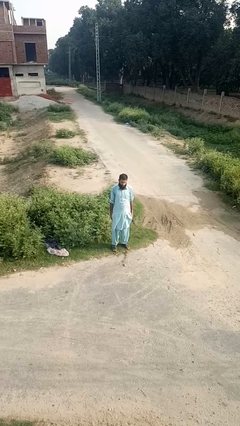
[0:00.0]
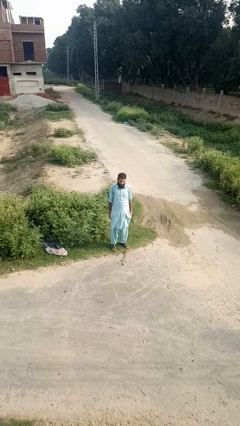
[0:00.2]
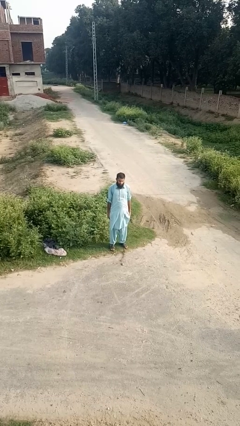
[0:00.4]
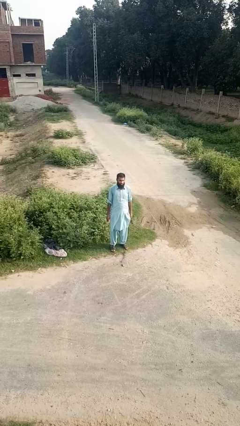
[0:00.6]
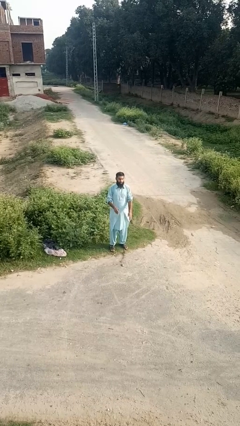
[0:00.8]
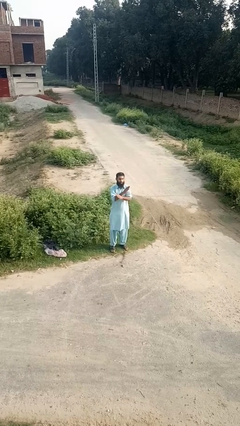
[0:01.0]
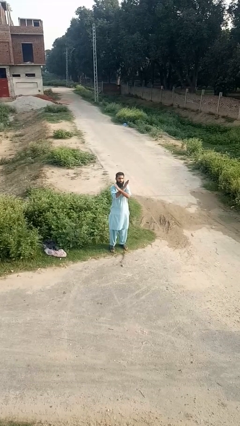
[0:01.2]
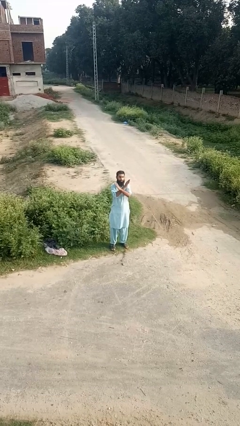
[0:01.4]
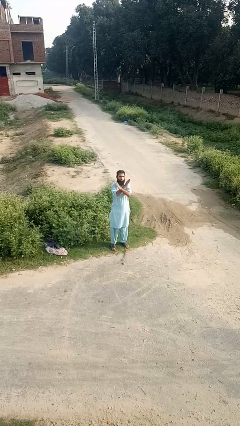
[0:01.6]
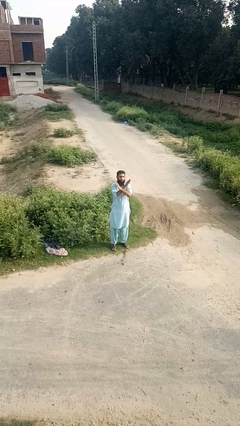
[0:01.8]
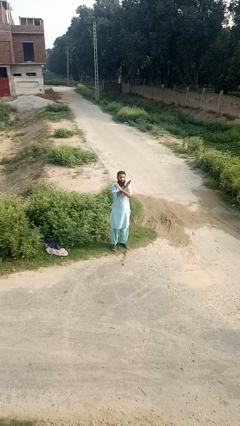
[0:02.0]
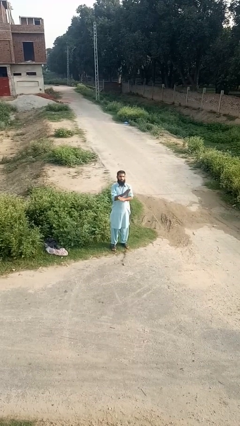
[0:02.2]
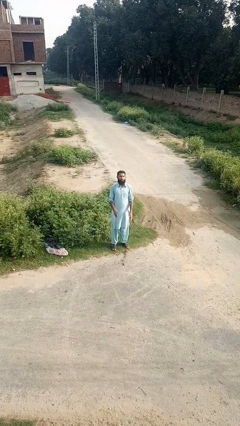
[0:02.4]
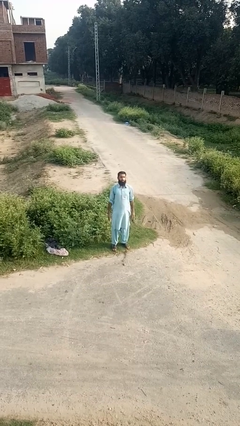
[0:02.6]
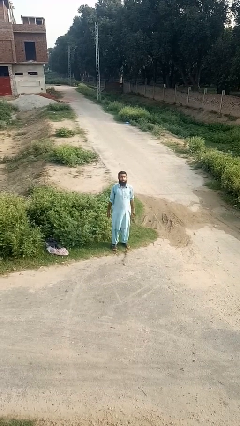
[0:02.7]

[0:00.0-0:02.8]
person crosses arms

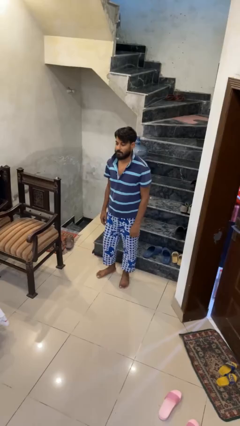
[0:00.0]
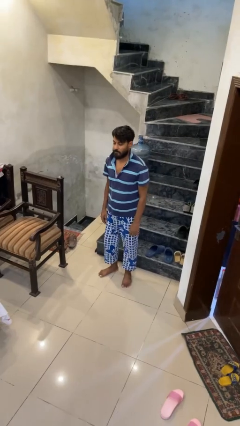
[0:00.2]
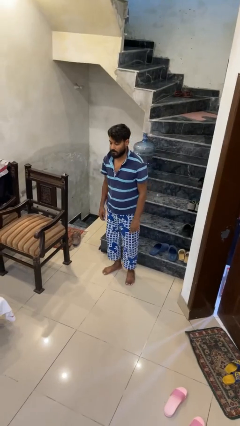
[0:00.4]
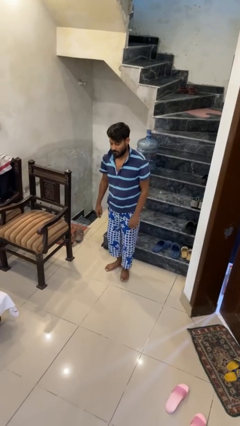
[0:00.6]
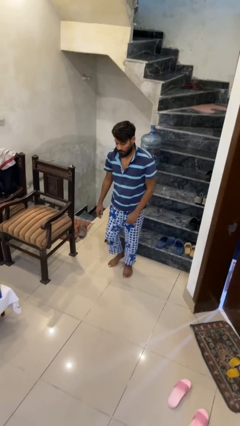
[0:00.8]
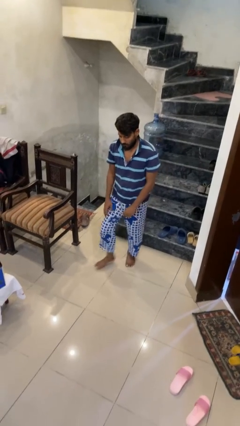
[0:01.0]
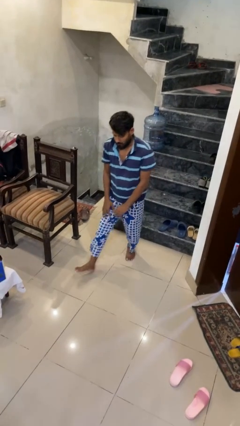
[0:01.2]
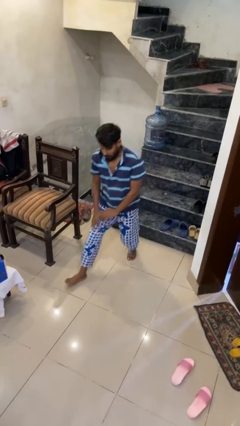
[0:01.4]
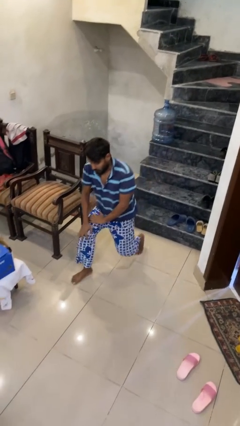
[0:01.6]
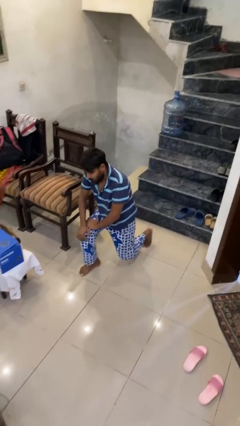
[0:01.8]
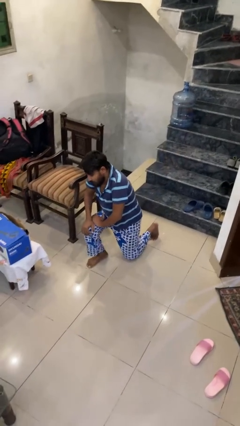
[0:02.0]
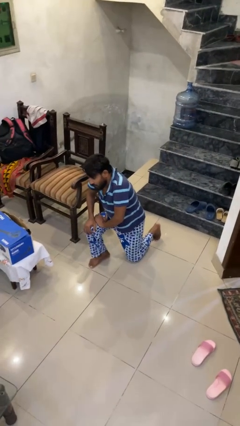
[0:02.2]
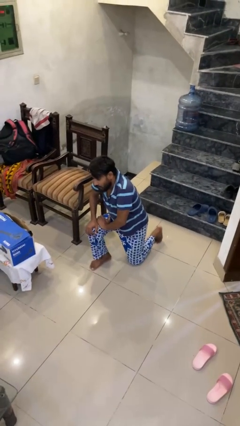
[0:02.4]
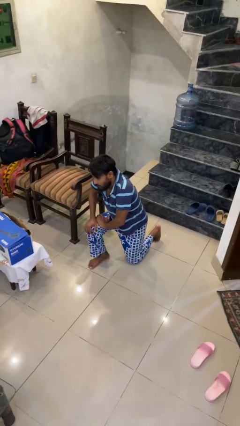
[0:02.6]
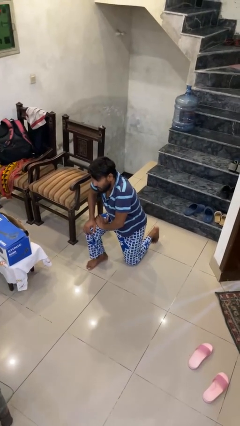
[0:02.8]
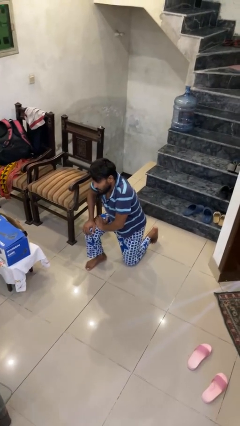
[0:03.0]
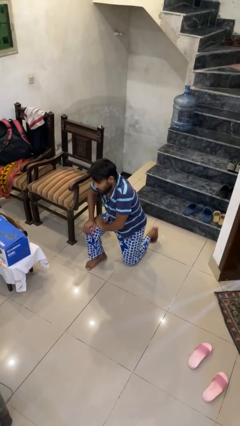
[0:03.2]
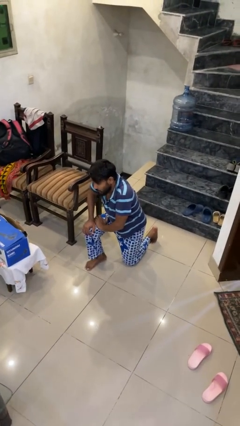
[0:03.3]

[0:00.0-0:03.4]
person kneels

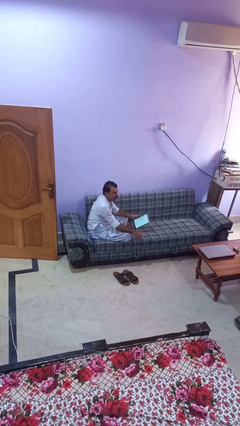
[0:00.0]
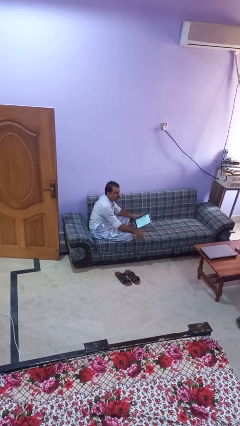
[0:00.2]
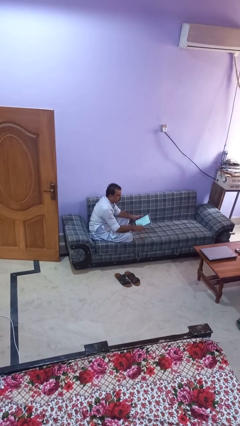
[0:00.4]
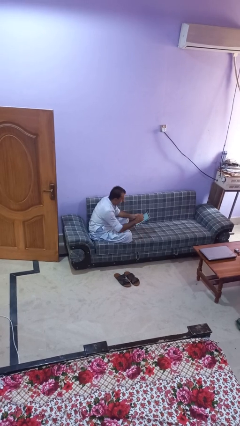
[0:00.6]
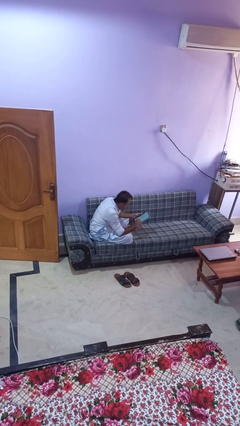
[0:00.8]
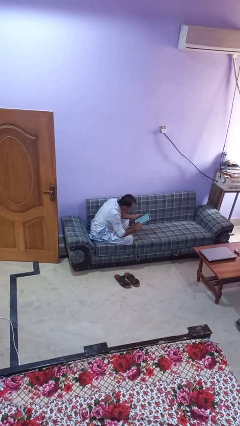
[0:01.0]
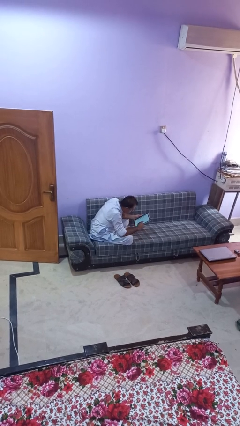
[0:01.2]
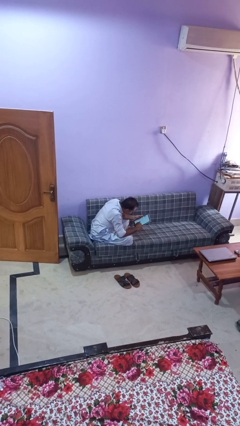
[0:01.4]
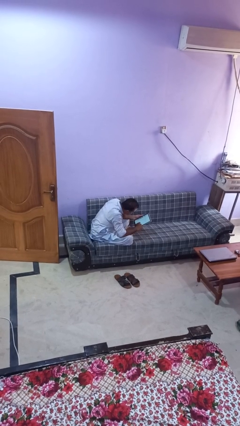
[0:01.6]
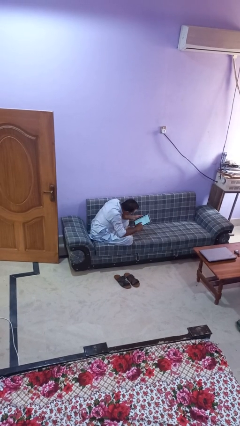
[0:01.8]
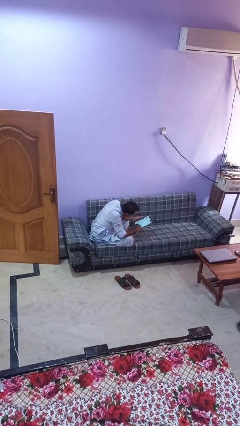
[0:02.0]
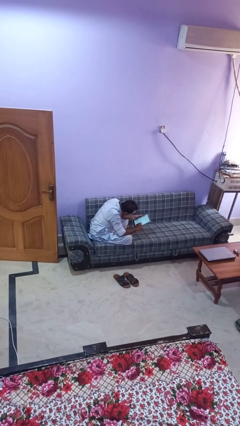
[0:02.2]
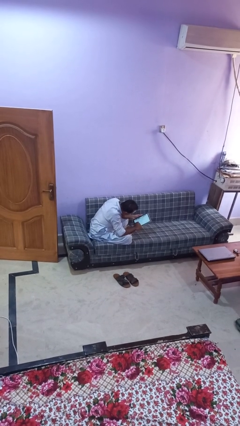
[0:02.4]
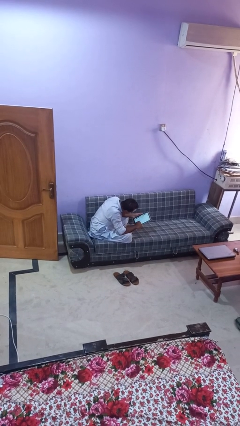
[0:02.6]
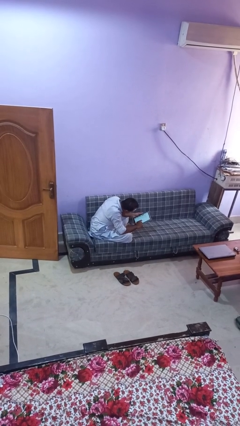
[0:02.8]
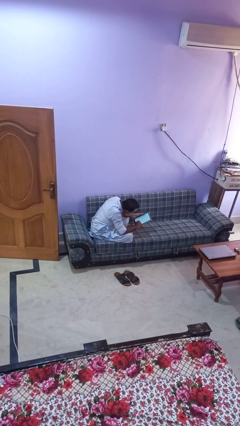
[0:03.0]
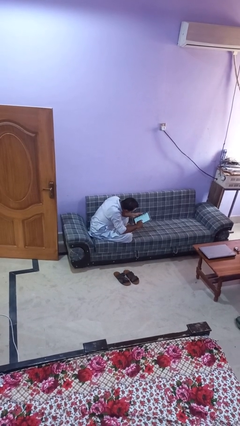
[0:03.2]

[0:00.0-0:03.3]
person interacts with tablet

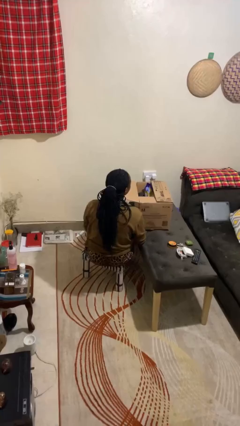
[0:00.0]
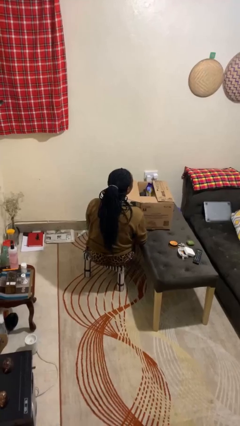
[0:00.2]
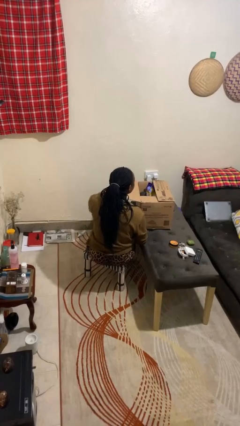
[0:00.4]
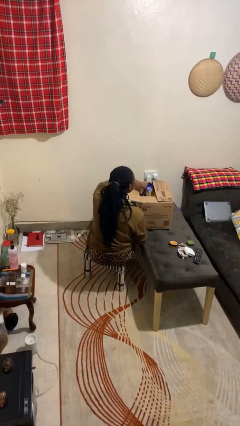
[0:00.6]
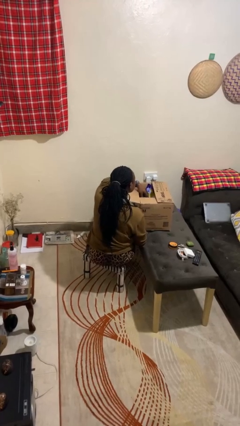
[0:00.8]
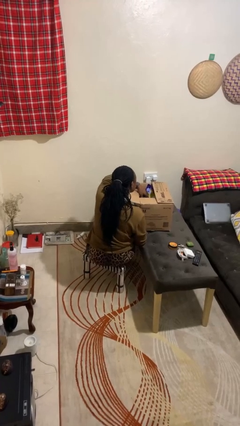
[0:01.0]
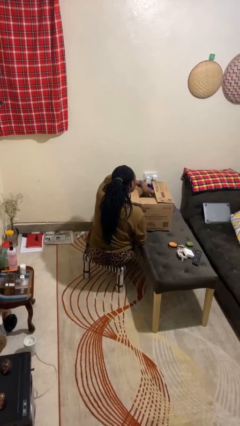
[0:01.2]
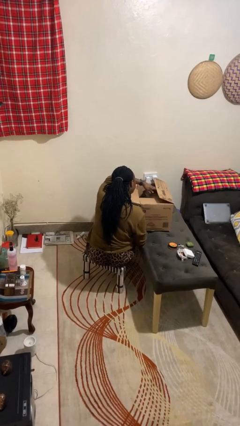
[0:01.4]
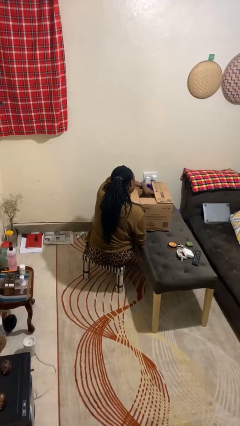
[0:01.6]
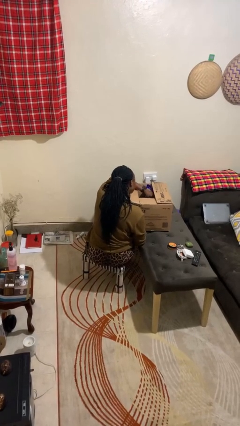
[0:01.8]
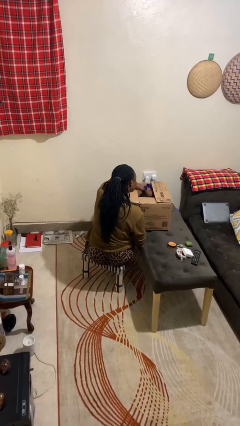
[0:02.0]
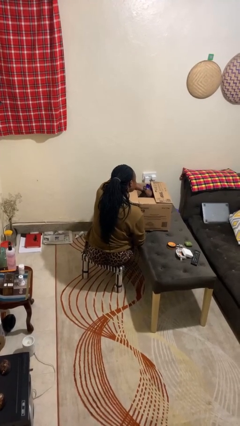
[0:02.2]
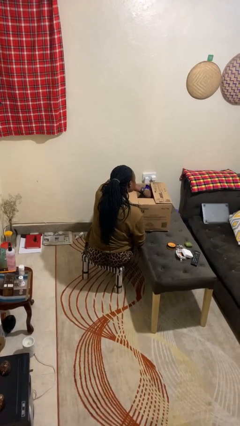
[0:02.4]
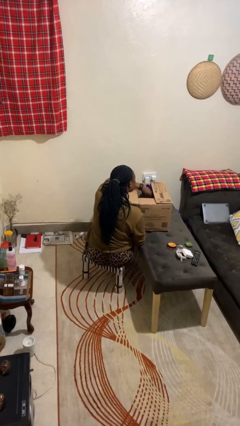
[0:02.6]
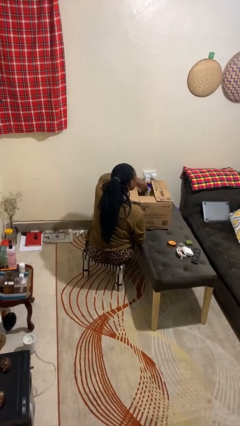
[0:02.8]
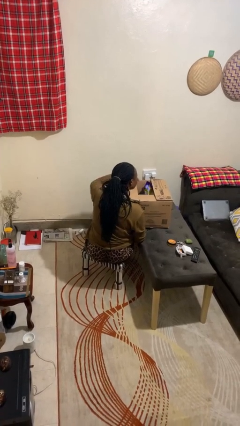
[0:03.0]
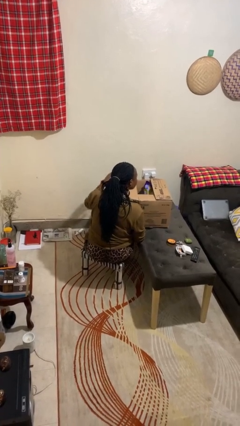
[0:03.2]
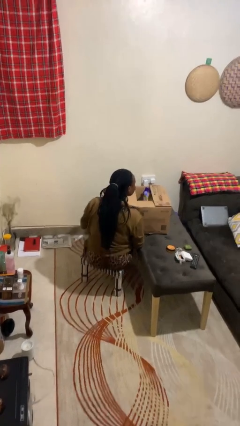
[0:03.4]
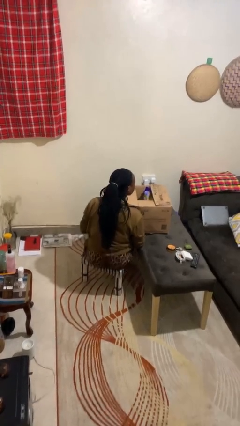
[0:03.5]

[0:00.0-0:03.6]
person searches in box

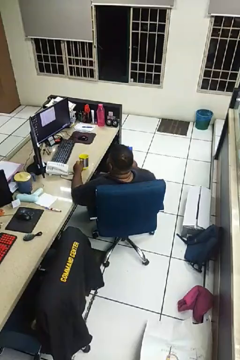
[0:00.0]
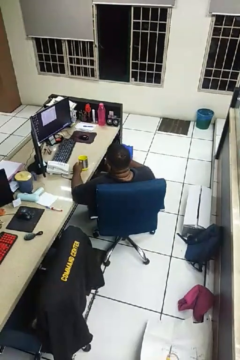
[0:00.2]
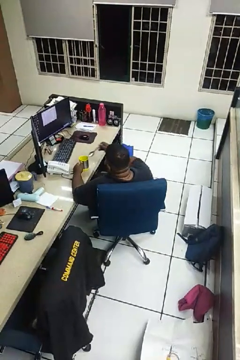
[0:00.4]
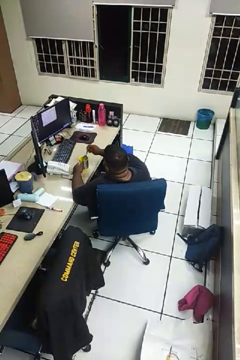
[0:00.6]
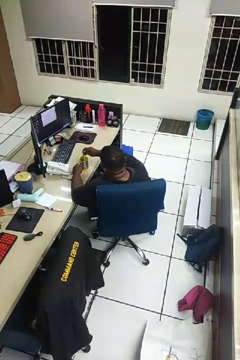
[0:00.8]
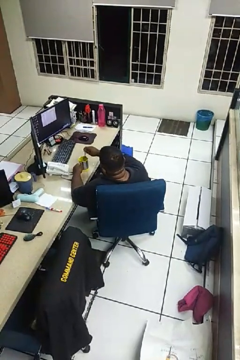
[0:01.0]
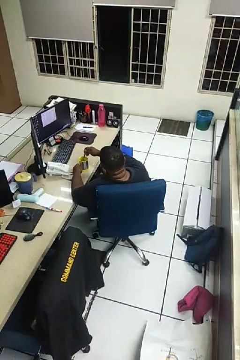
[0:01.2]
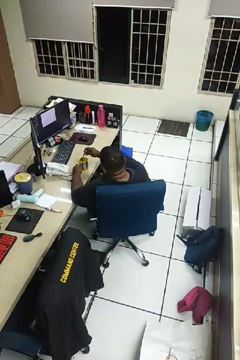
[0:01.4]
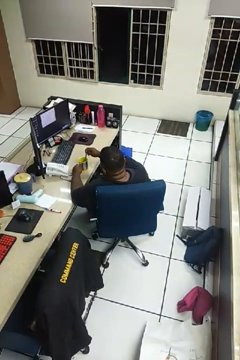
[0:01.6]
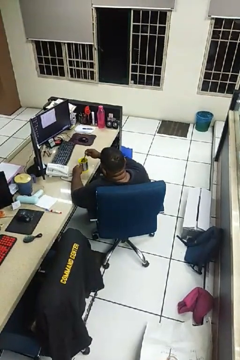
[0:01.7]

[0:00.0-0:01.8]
person stirs mug

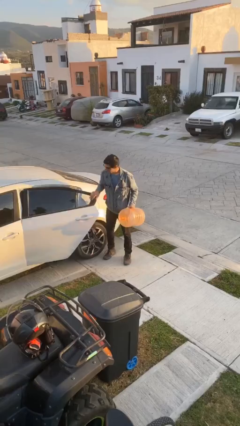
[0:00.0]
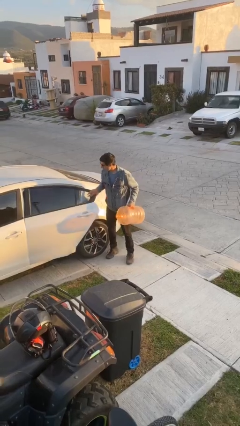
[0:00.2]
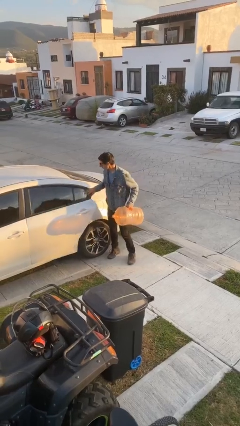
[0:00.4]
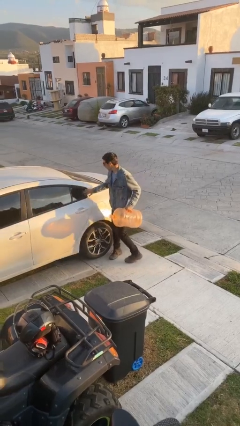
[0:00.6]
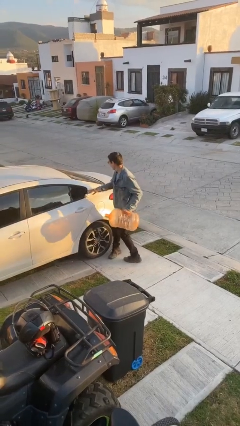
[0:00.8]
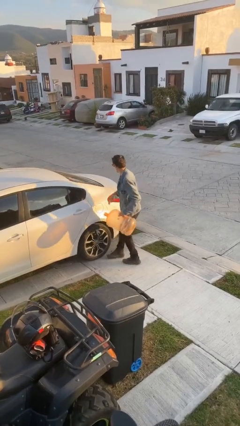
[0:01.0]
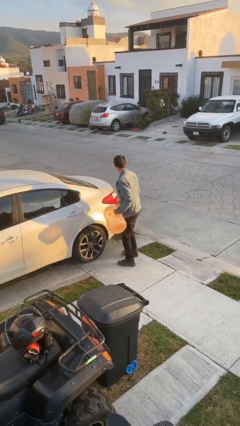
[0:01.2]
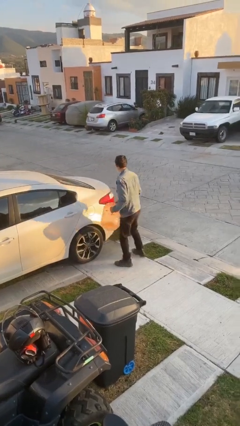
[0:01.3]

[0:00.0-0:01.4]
person closes car door

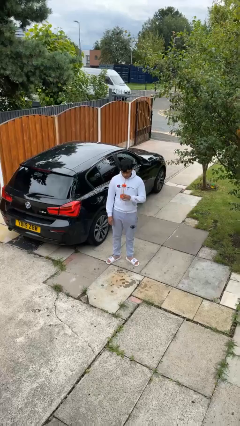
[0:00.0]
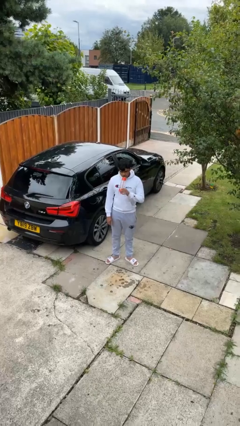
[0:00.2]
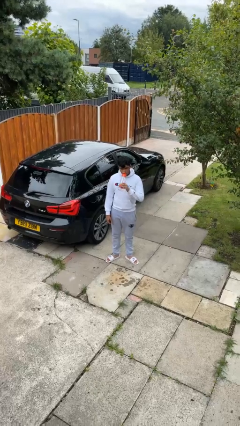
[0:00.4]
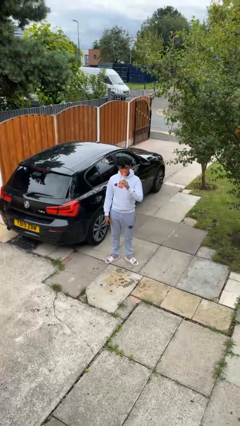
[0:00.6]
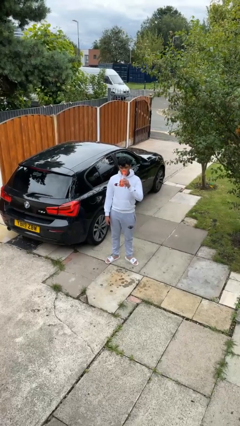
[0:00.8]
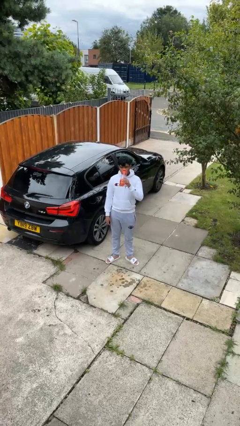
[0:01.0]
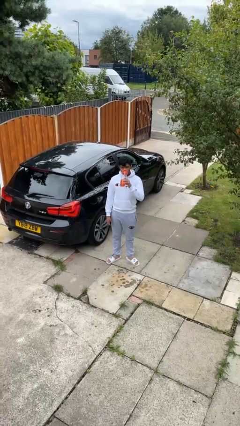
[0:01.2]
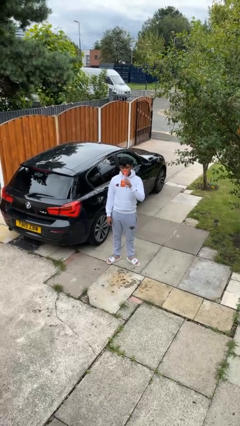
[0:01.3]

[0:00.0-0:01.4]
person drinks from bottle
